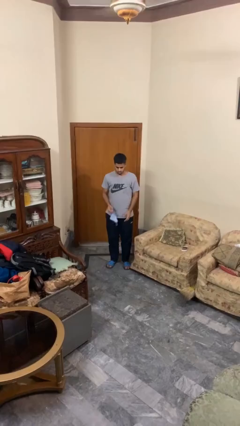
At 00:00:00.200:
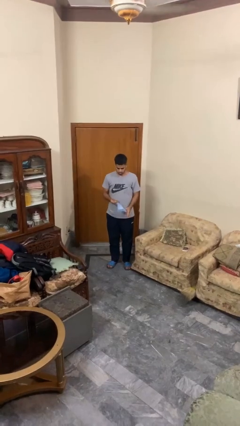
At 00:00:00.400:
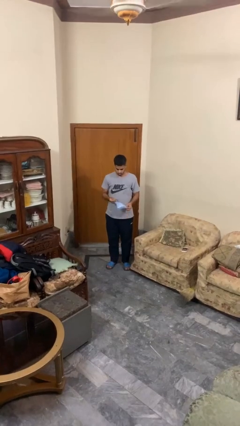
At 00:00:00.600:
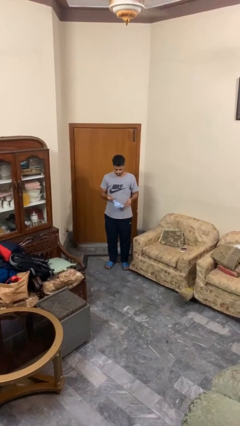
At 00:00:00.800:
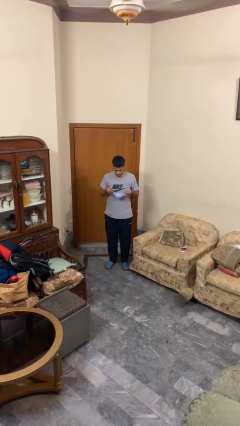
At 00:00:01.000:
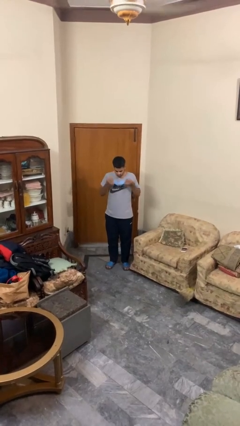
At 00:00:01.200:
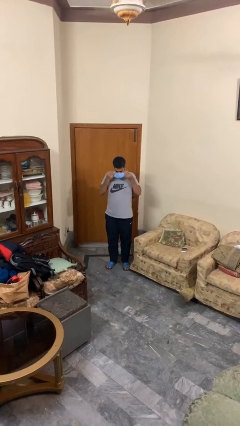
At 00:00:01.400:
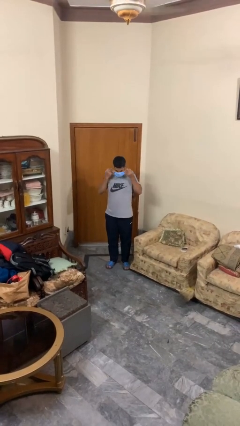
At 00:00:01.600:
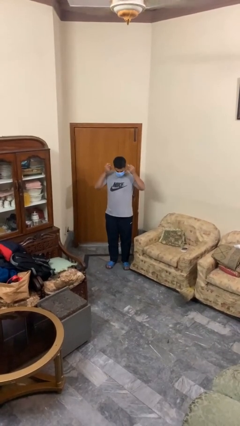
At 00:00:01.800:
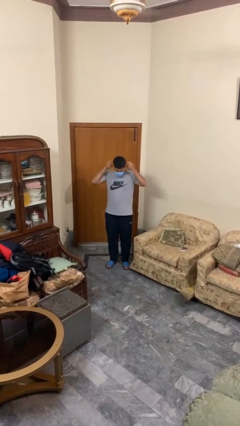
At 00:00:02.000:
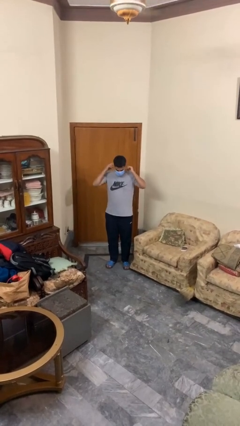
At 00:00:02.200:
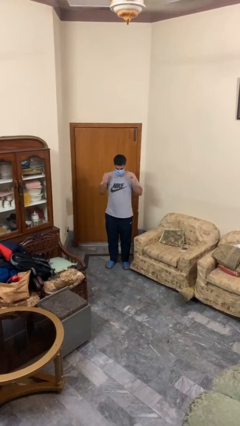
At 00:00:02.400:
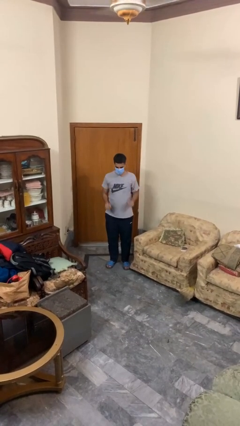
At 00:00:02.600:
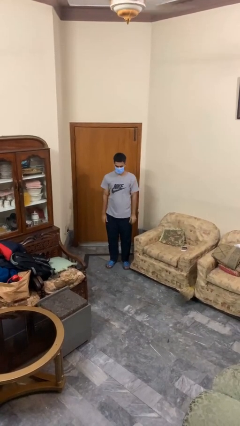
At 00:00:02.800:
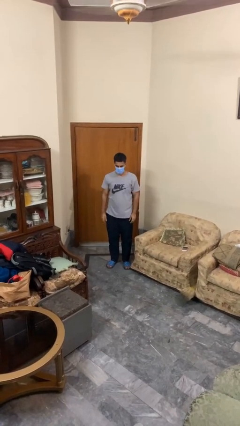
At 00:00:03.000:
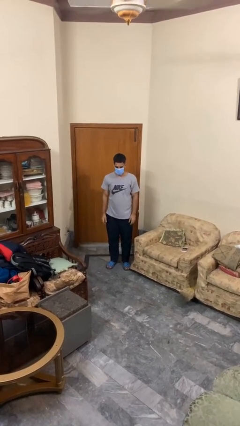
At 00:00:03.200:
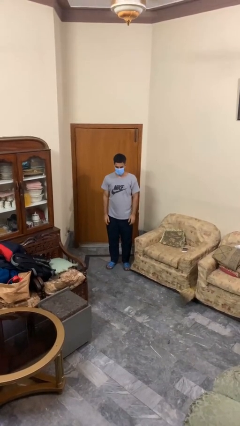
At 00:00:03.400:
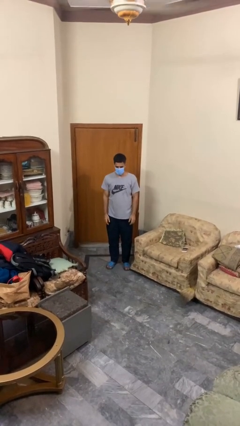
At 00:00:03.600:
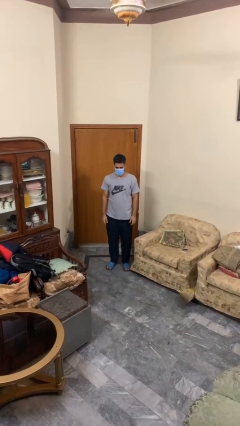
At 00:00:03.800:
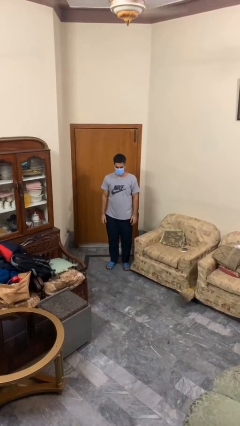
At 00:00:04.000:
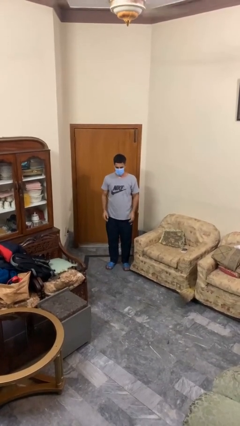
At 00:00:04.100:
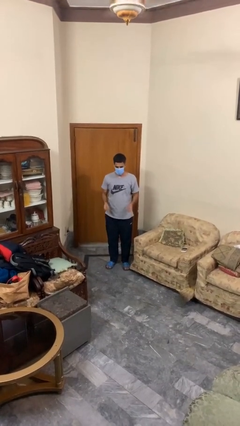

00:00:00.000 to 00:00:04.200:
person puts on facemask

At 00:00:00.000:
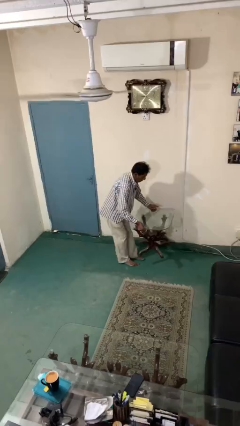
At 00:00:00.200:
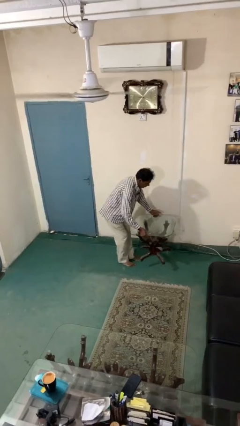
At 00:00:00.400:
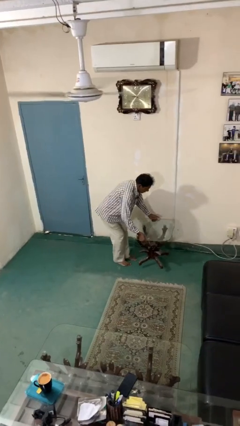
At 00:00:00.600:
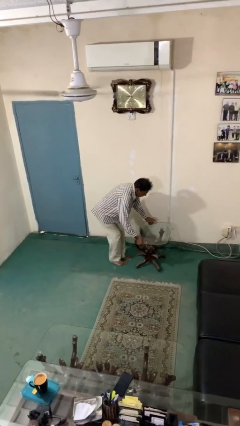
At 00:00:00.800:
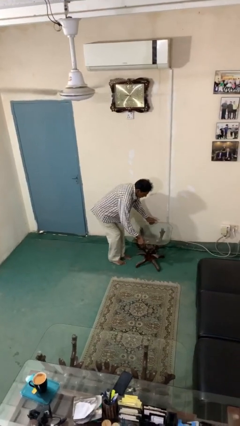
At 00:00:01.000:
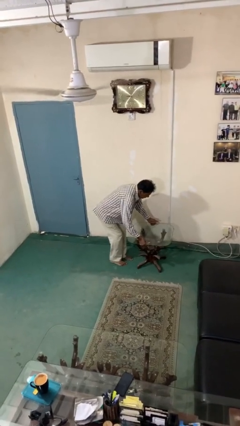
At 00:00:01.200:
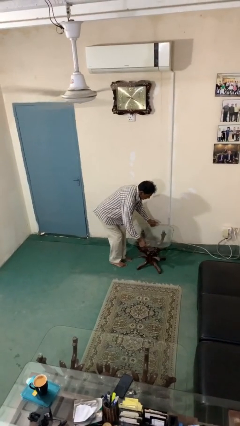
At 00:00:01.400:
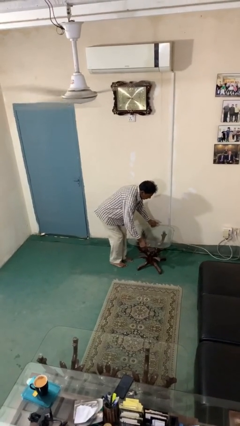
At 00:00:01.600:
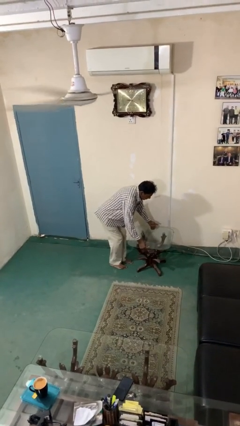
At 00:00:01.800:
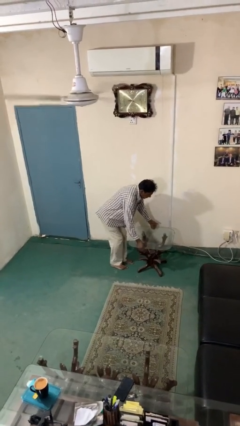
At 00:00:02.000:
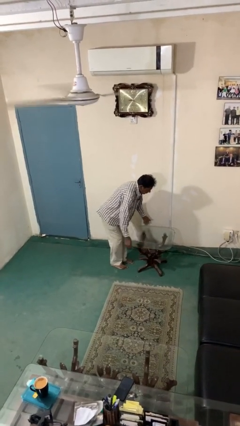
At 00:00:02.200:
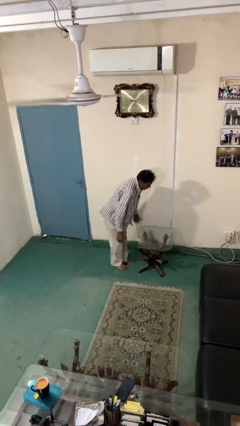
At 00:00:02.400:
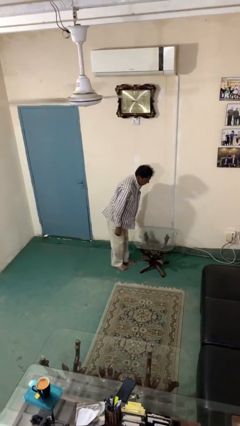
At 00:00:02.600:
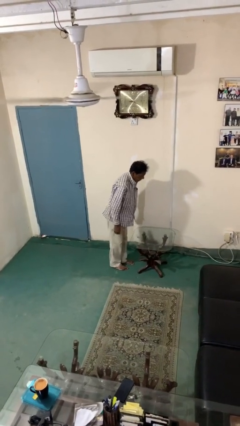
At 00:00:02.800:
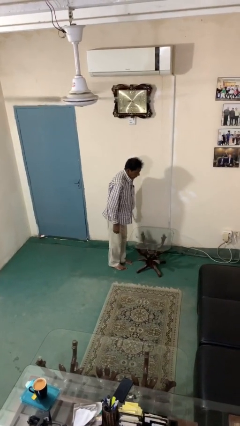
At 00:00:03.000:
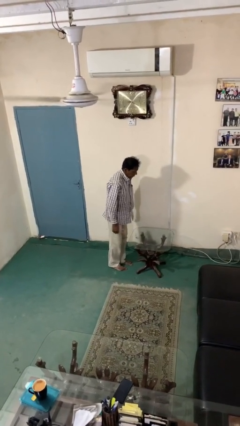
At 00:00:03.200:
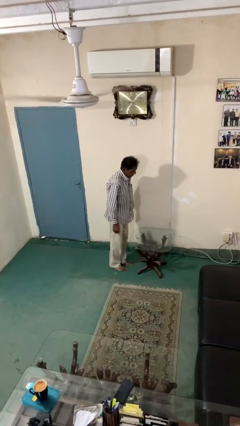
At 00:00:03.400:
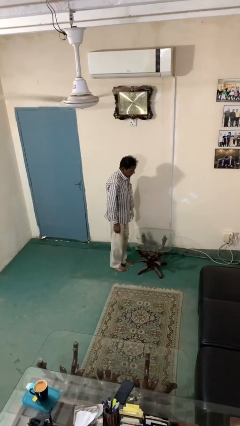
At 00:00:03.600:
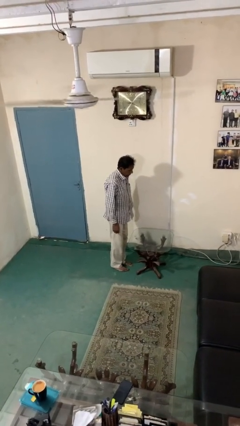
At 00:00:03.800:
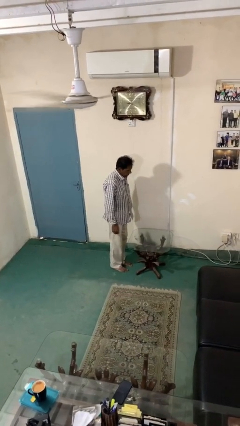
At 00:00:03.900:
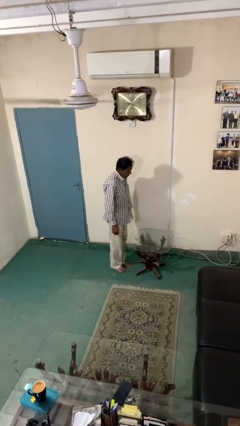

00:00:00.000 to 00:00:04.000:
person puts down object on floor

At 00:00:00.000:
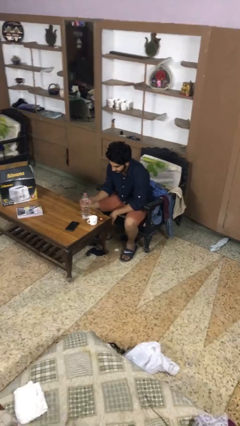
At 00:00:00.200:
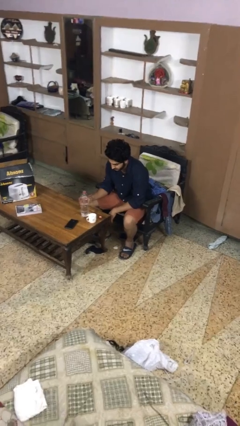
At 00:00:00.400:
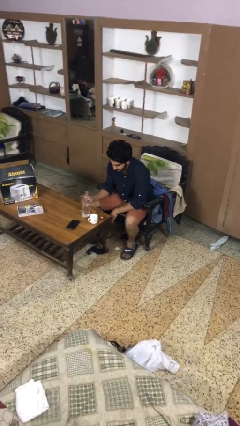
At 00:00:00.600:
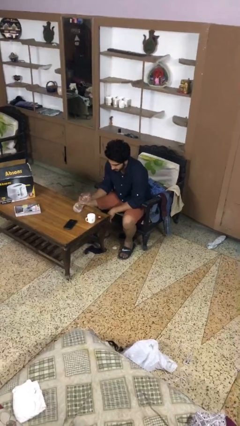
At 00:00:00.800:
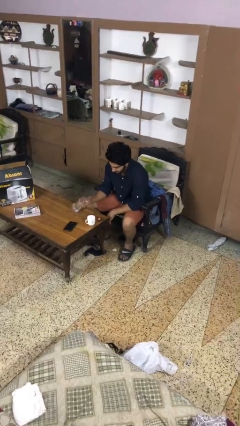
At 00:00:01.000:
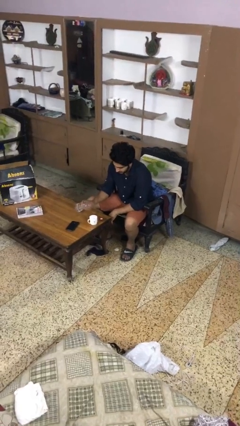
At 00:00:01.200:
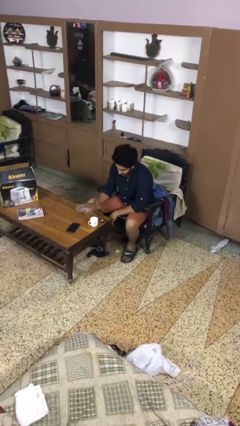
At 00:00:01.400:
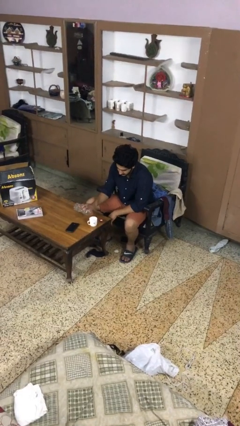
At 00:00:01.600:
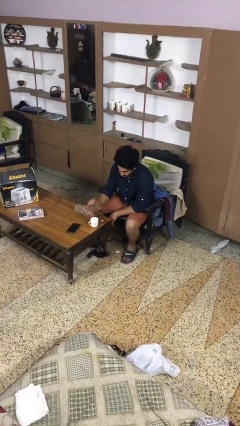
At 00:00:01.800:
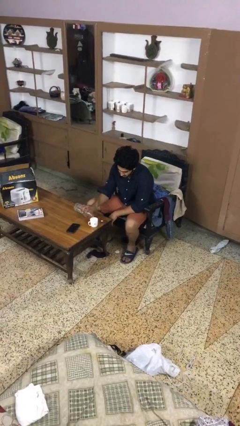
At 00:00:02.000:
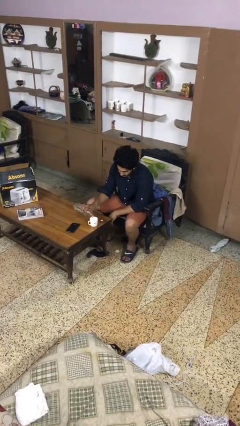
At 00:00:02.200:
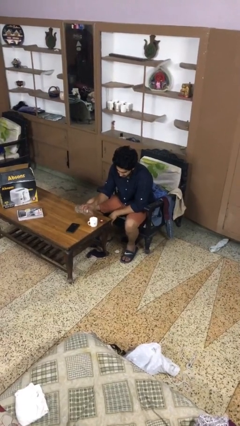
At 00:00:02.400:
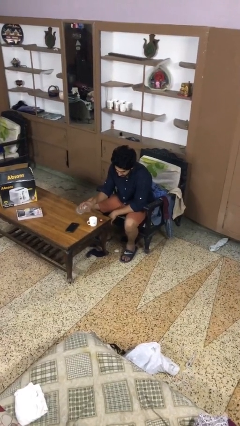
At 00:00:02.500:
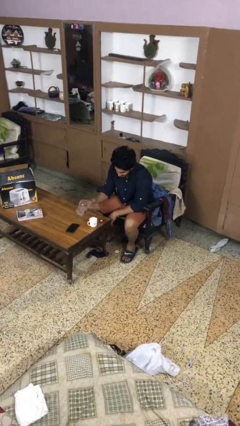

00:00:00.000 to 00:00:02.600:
person pours liquid into cup

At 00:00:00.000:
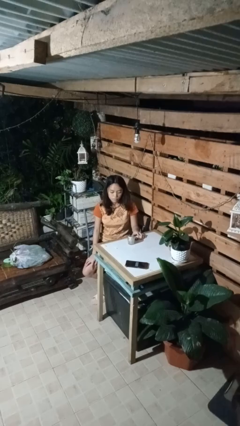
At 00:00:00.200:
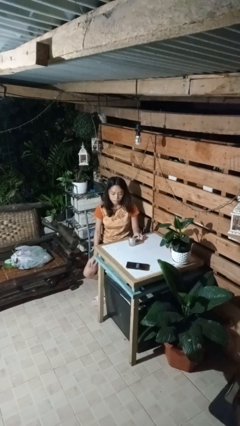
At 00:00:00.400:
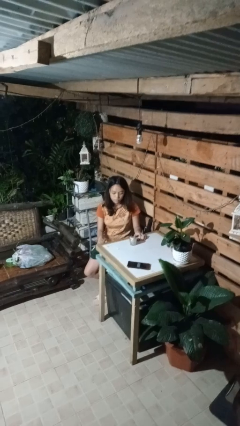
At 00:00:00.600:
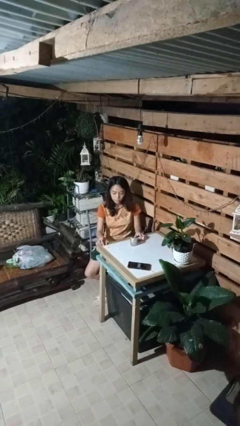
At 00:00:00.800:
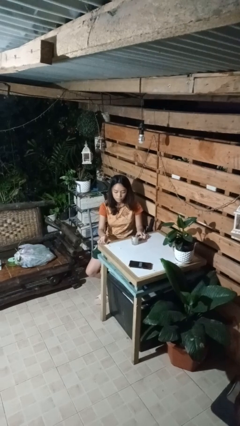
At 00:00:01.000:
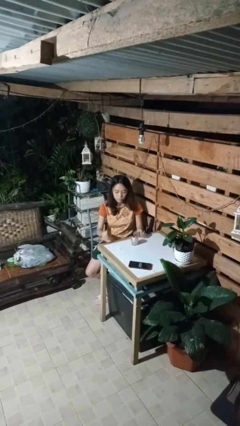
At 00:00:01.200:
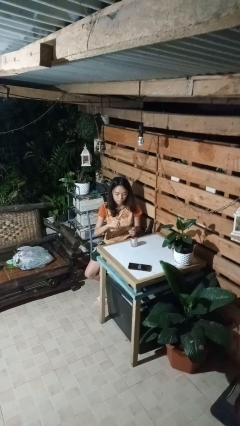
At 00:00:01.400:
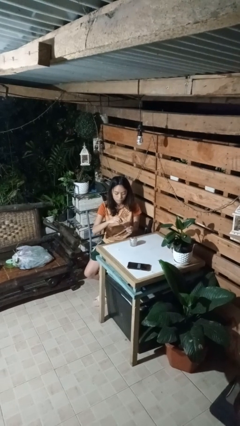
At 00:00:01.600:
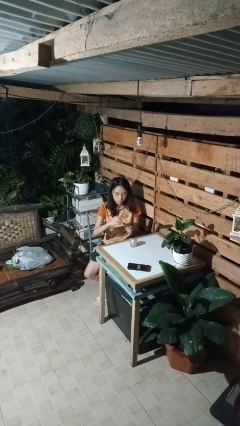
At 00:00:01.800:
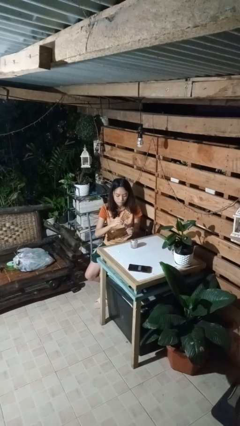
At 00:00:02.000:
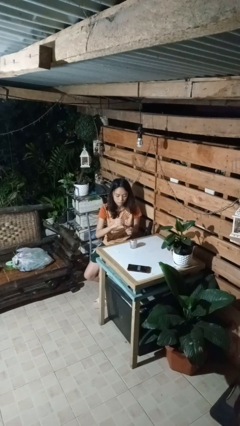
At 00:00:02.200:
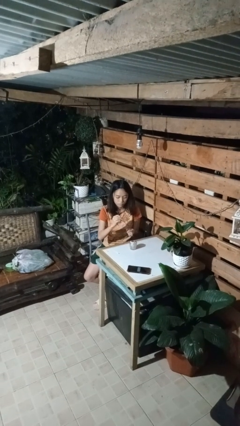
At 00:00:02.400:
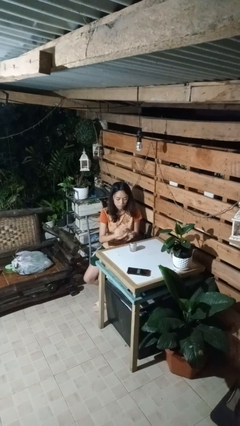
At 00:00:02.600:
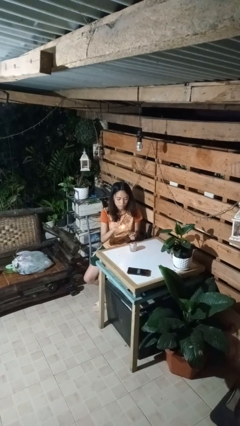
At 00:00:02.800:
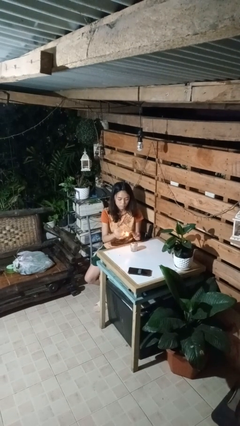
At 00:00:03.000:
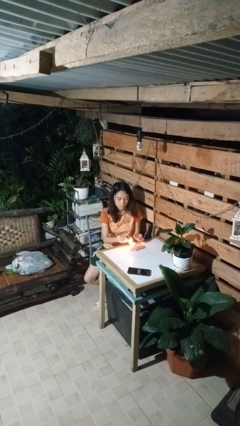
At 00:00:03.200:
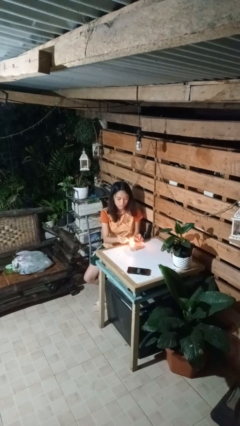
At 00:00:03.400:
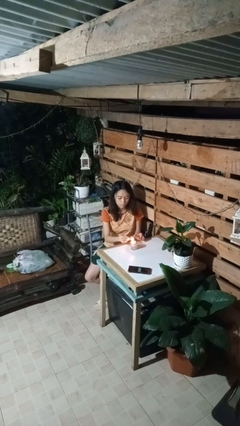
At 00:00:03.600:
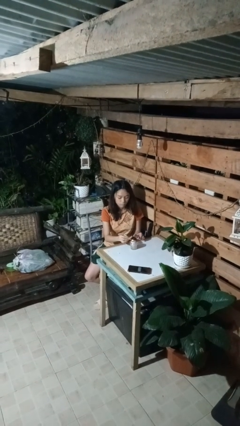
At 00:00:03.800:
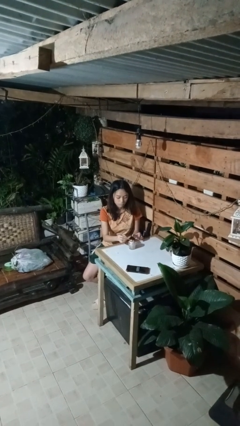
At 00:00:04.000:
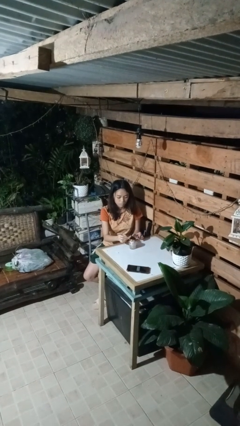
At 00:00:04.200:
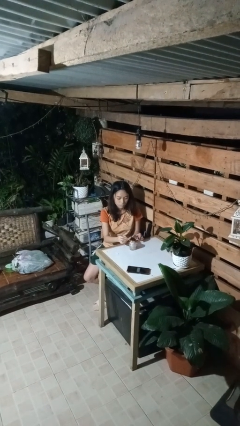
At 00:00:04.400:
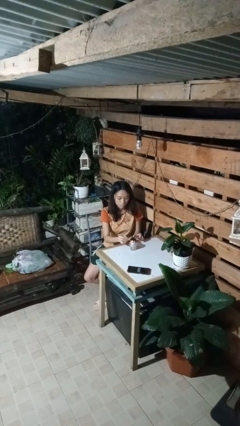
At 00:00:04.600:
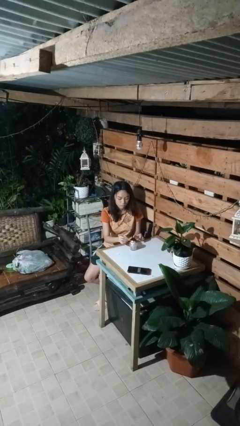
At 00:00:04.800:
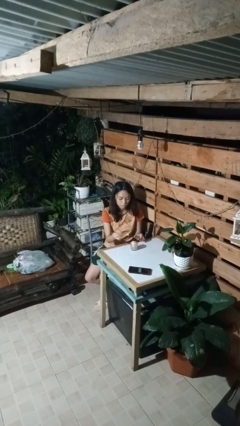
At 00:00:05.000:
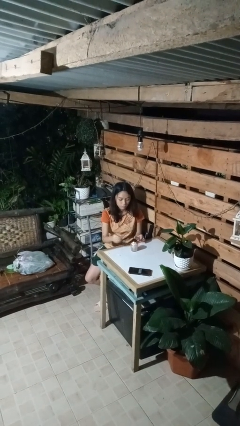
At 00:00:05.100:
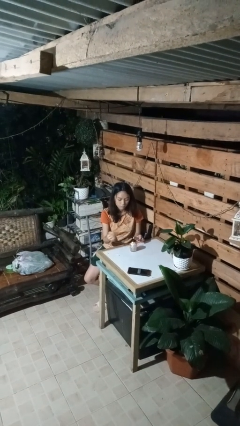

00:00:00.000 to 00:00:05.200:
person lights candle

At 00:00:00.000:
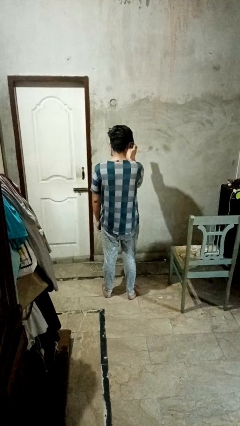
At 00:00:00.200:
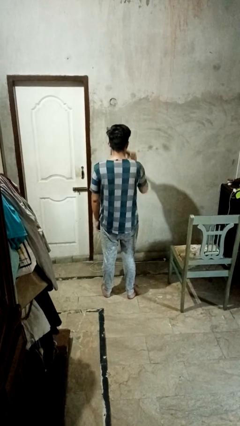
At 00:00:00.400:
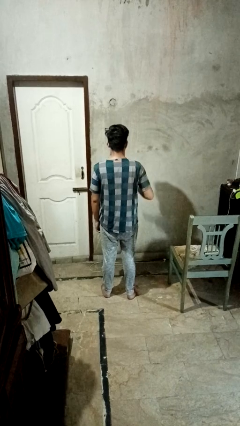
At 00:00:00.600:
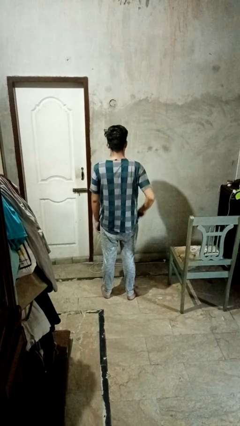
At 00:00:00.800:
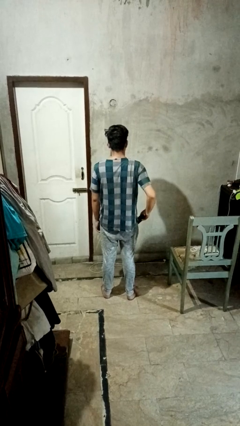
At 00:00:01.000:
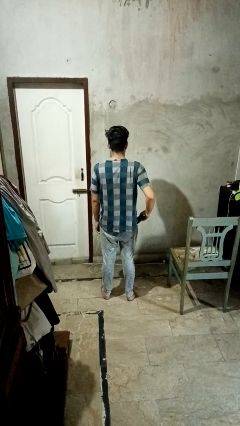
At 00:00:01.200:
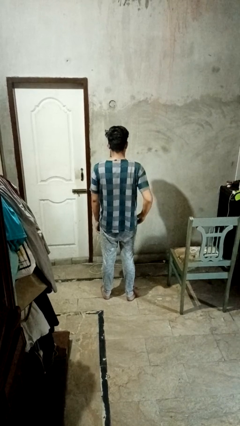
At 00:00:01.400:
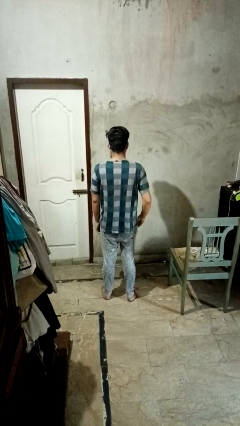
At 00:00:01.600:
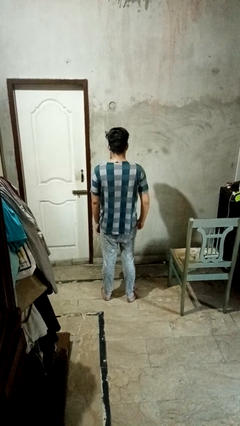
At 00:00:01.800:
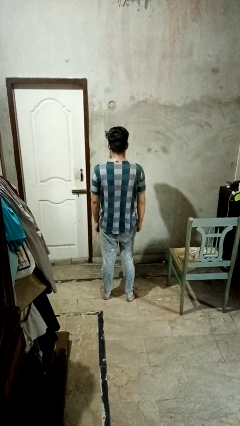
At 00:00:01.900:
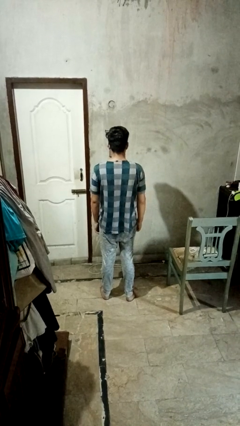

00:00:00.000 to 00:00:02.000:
person puts phone into pocket
